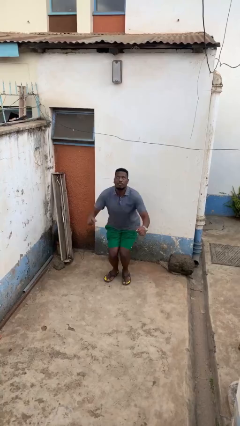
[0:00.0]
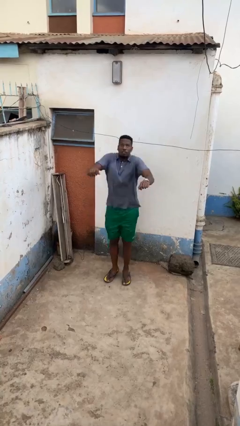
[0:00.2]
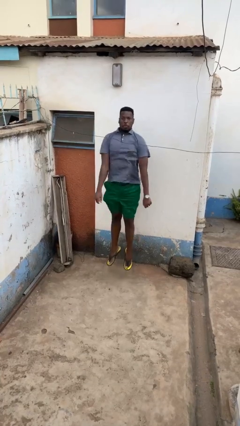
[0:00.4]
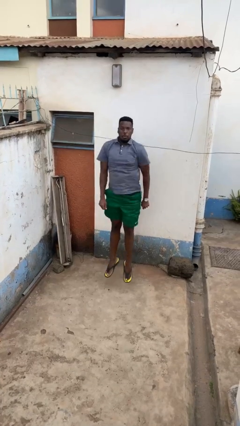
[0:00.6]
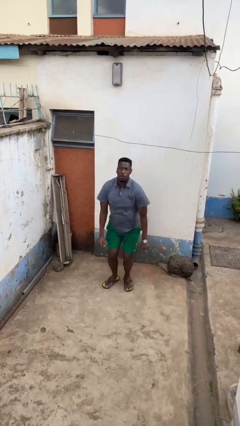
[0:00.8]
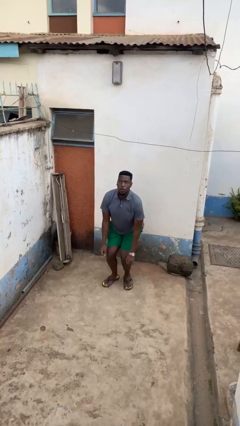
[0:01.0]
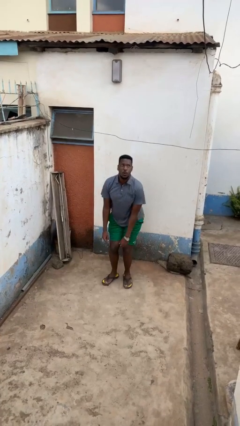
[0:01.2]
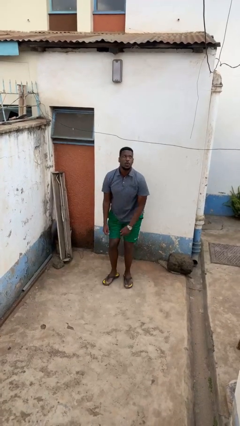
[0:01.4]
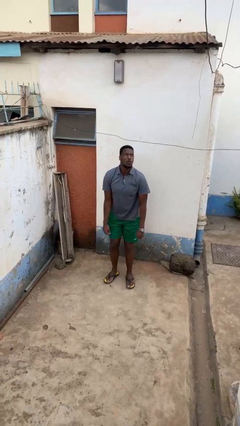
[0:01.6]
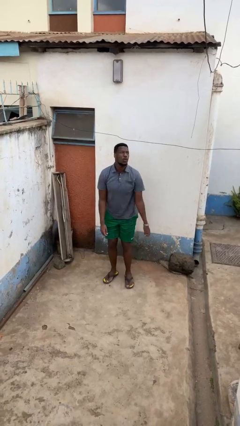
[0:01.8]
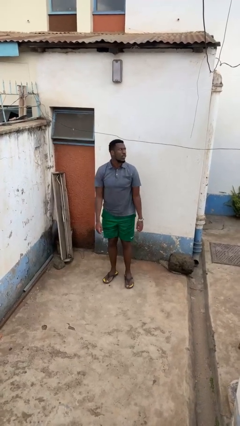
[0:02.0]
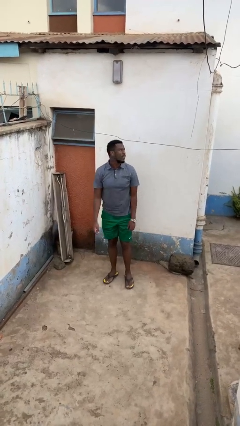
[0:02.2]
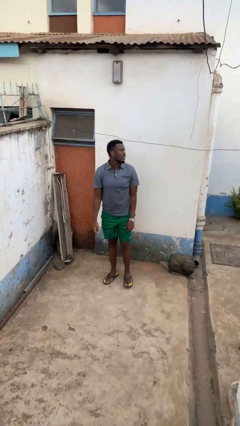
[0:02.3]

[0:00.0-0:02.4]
person jumps

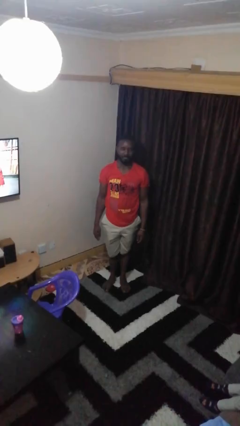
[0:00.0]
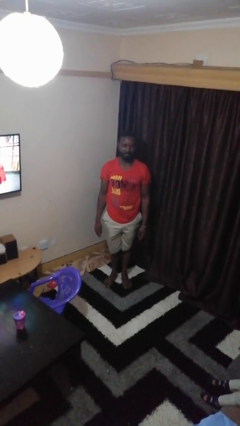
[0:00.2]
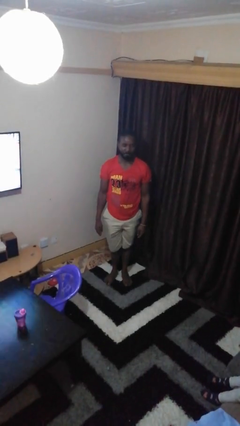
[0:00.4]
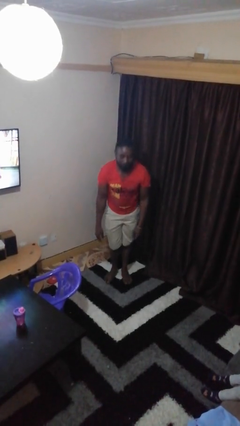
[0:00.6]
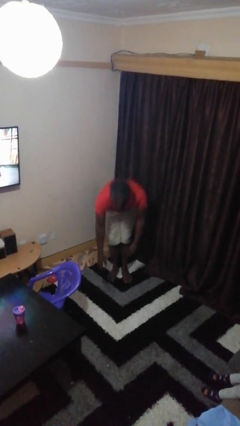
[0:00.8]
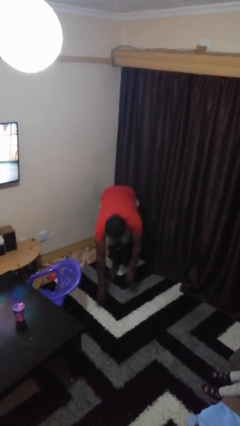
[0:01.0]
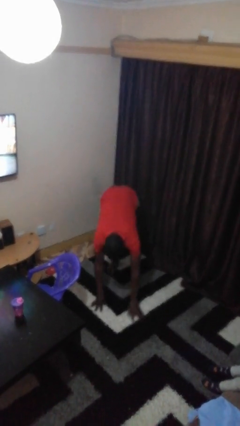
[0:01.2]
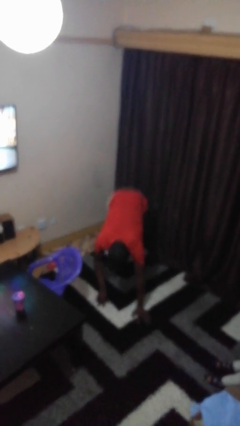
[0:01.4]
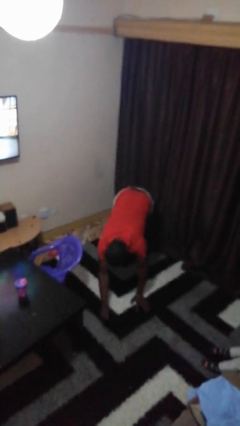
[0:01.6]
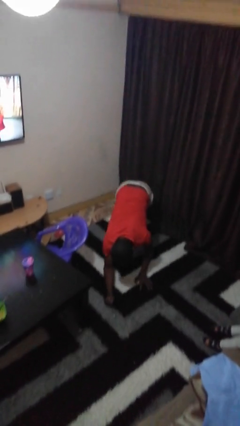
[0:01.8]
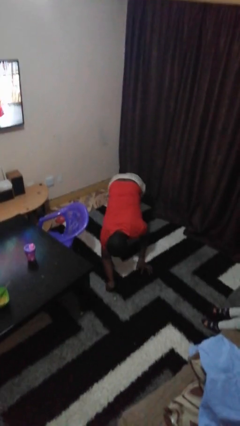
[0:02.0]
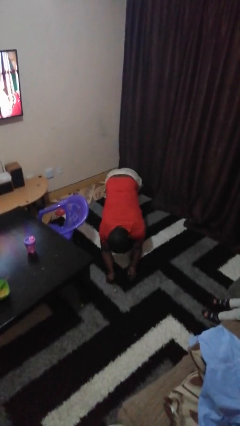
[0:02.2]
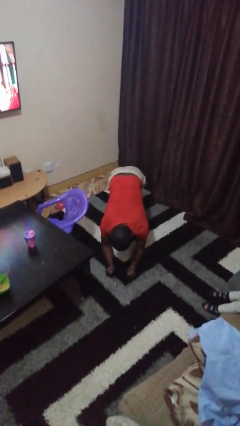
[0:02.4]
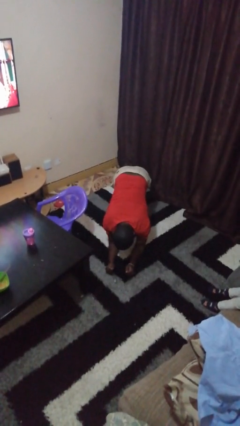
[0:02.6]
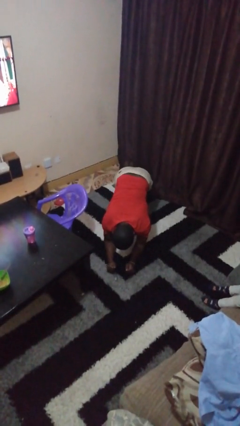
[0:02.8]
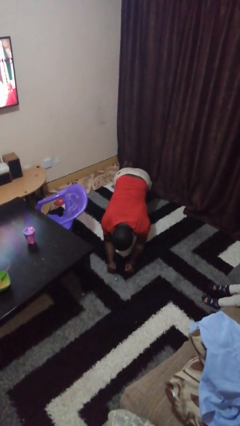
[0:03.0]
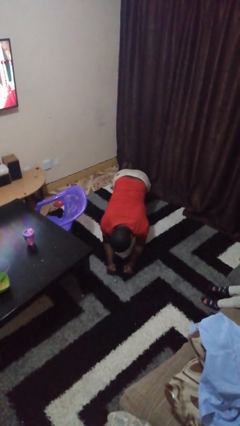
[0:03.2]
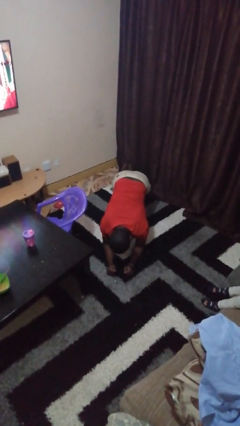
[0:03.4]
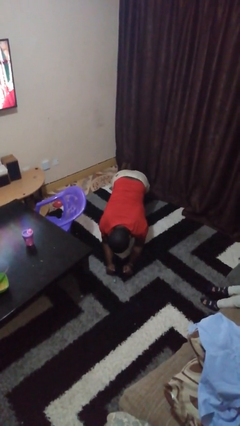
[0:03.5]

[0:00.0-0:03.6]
person exercises with plank

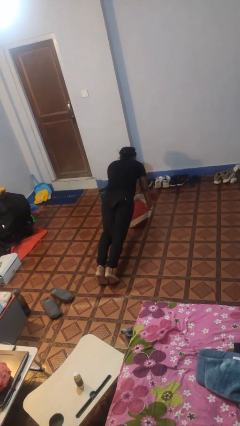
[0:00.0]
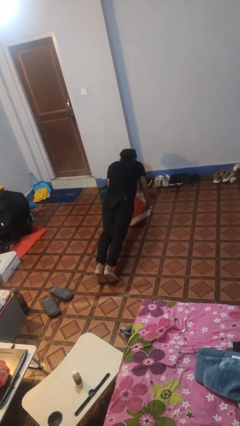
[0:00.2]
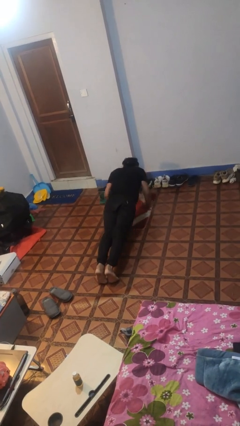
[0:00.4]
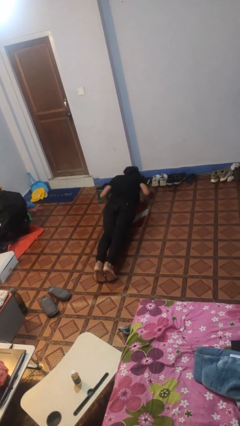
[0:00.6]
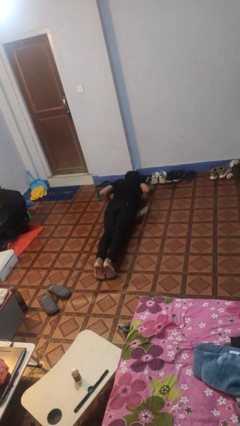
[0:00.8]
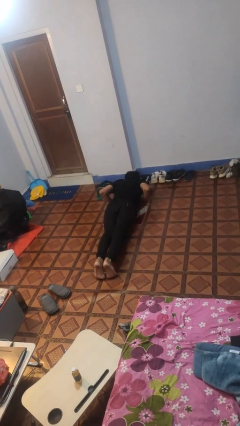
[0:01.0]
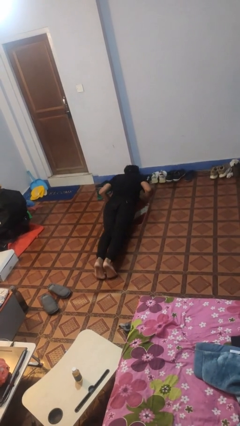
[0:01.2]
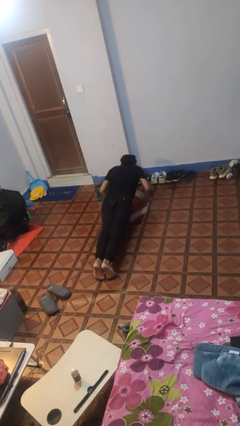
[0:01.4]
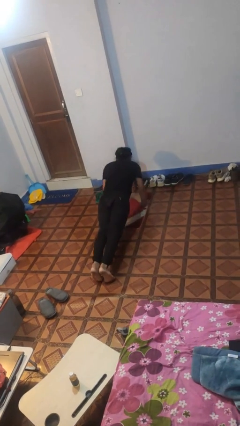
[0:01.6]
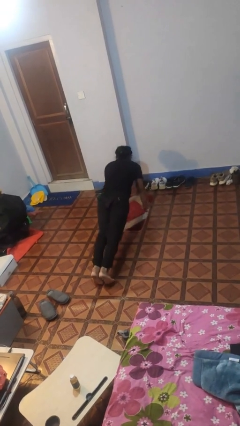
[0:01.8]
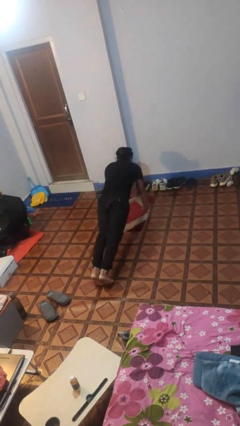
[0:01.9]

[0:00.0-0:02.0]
person exercises with pushup

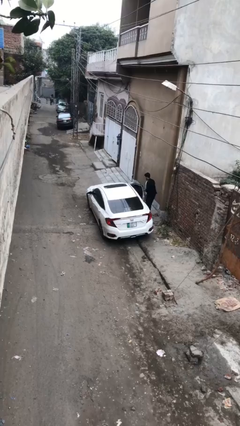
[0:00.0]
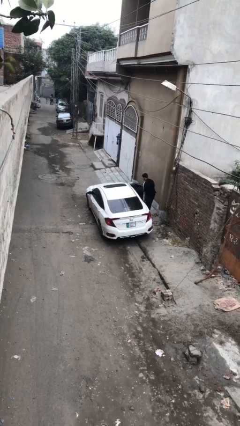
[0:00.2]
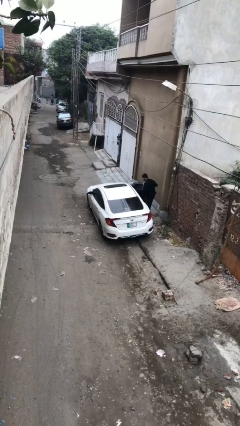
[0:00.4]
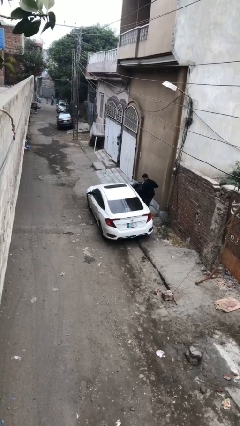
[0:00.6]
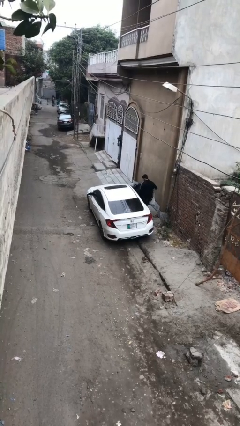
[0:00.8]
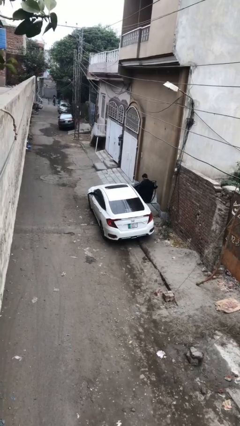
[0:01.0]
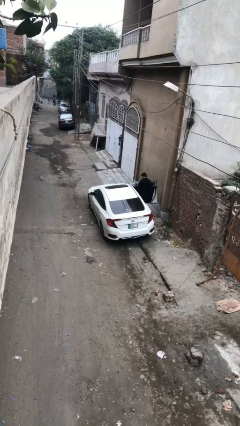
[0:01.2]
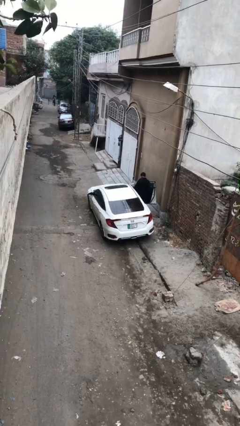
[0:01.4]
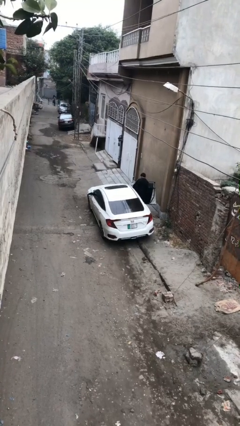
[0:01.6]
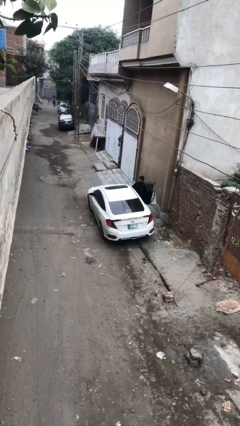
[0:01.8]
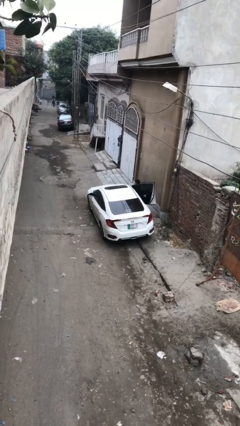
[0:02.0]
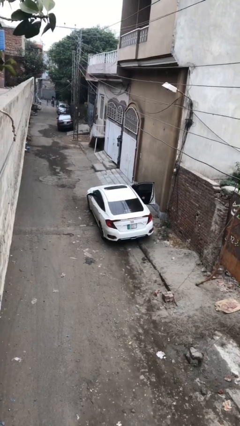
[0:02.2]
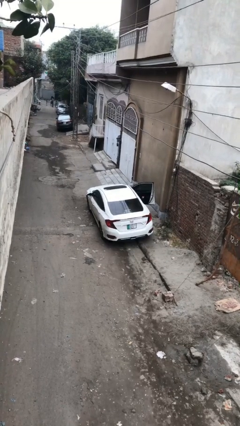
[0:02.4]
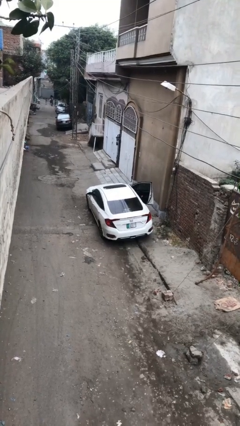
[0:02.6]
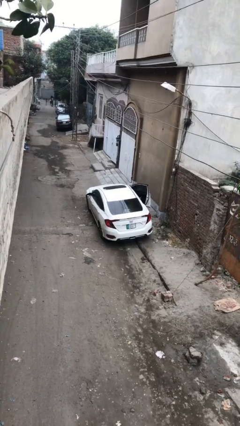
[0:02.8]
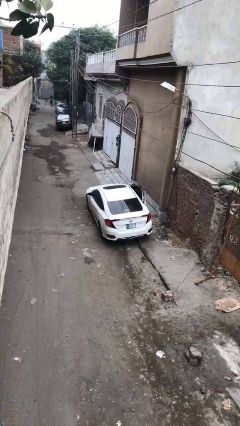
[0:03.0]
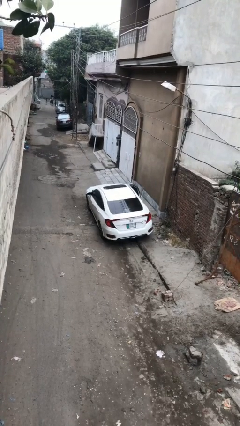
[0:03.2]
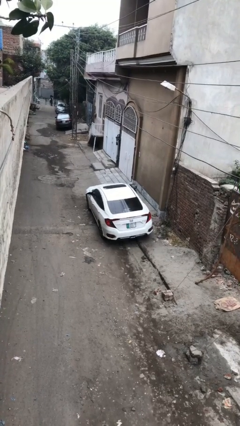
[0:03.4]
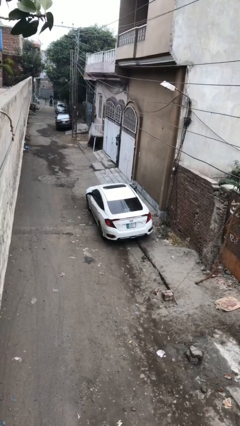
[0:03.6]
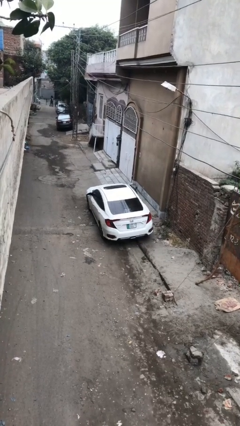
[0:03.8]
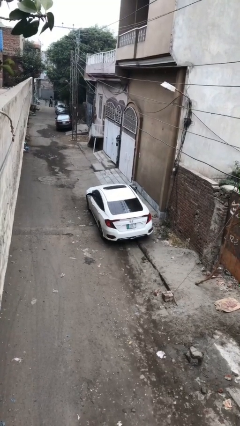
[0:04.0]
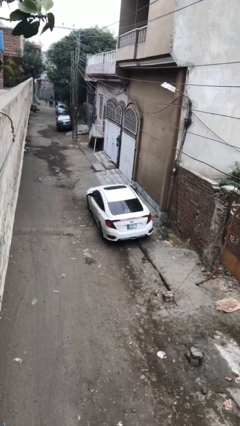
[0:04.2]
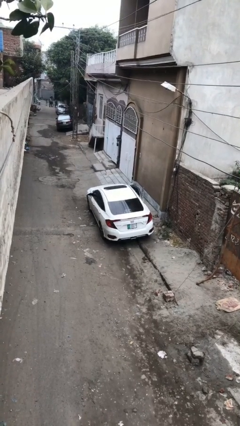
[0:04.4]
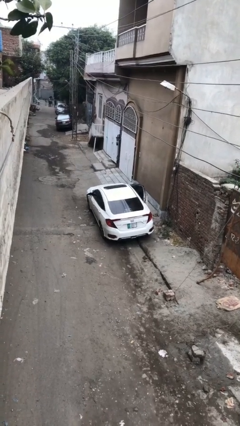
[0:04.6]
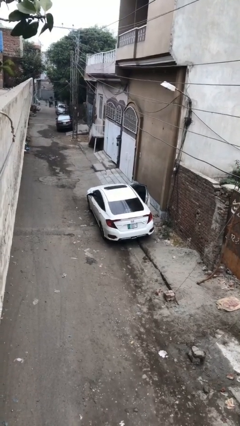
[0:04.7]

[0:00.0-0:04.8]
car picks up person

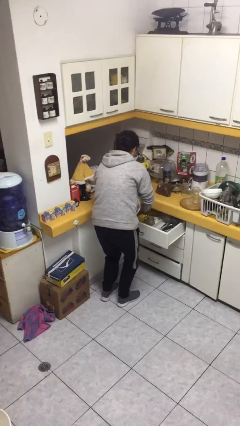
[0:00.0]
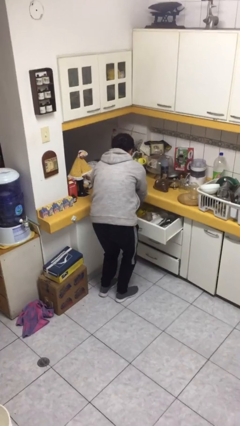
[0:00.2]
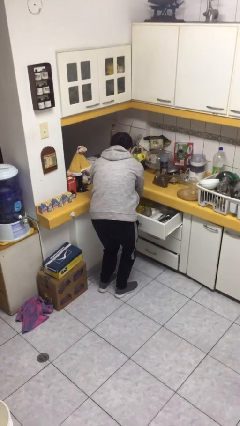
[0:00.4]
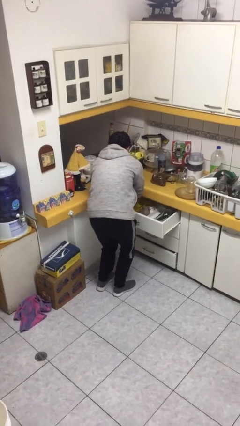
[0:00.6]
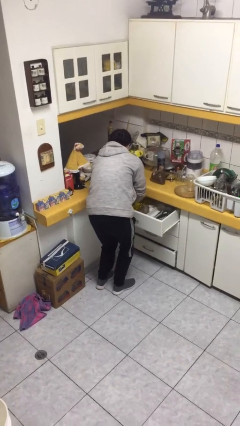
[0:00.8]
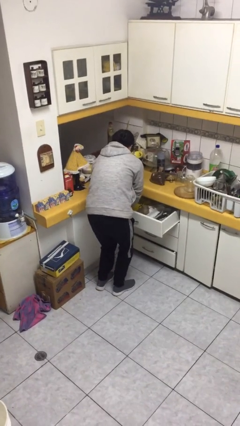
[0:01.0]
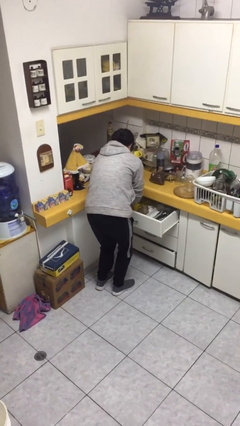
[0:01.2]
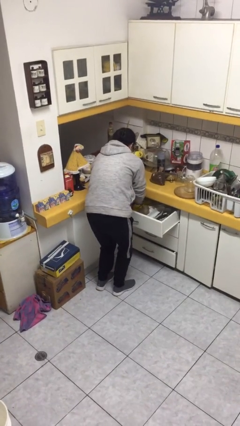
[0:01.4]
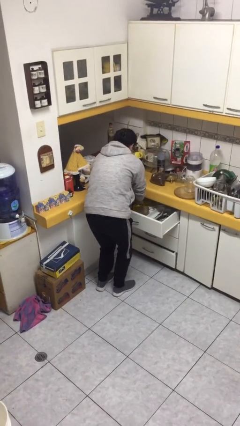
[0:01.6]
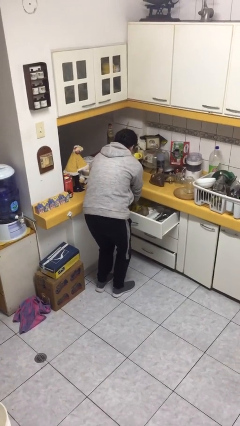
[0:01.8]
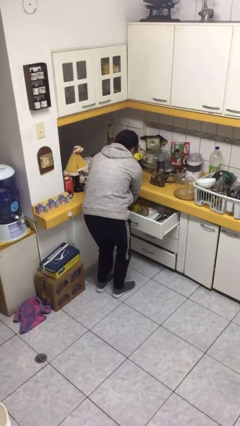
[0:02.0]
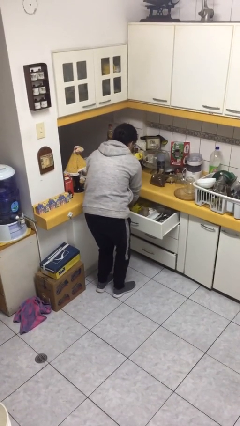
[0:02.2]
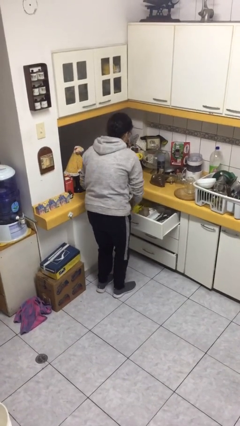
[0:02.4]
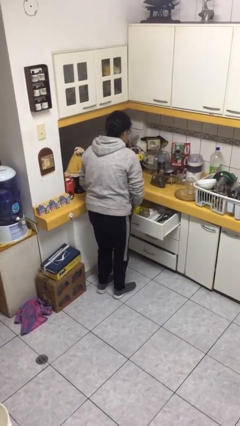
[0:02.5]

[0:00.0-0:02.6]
person searches in kitchen drawer

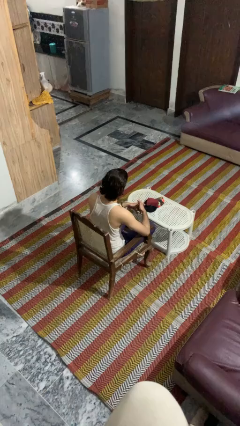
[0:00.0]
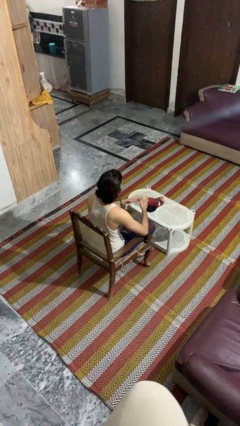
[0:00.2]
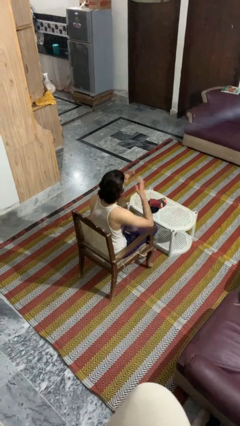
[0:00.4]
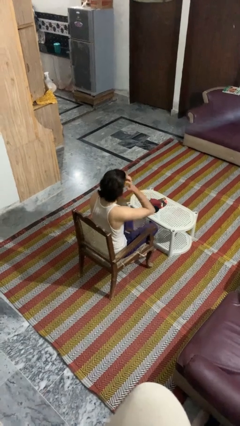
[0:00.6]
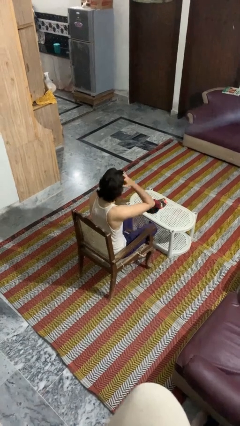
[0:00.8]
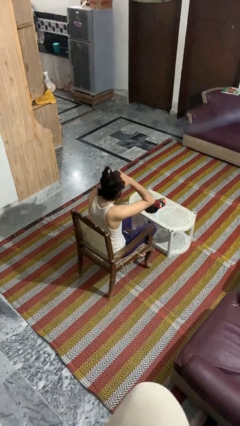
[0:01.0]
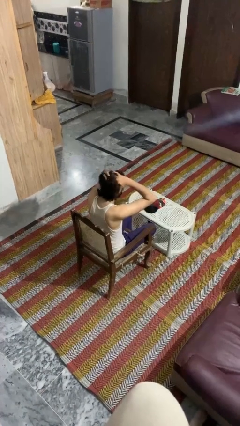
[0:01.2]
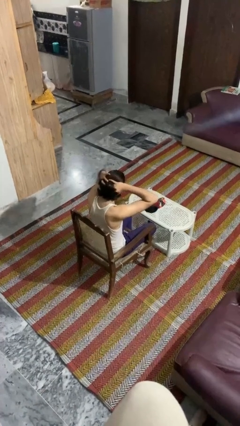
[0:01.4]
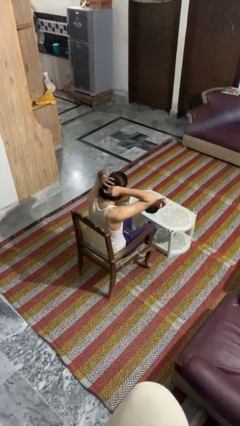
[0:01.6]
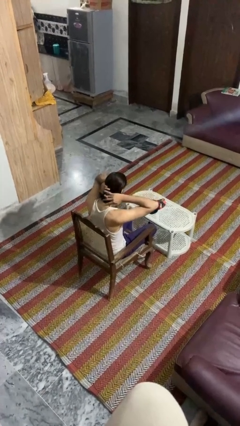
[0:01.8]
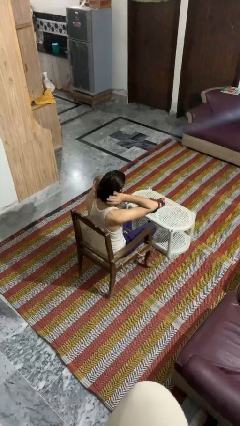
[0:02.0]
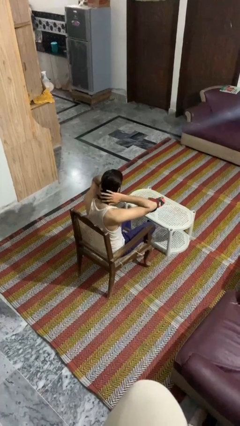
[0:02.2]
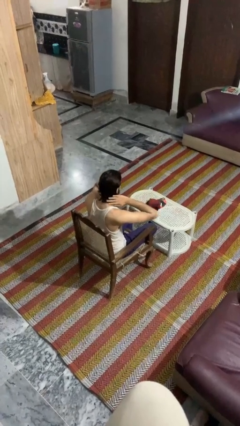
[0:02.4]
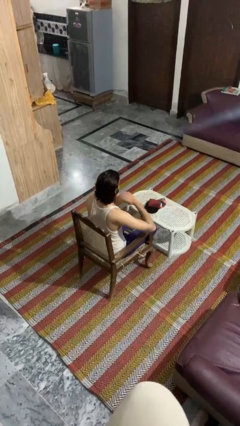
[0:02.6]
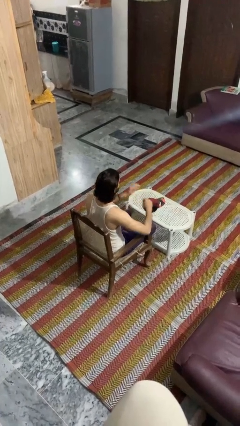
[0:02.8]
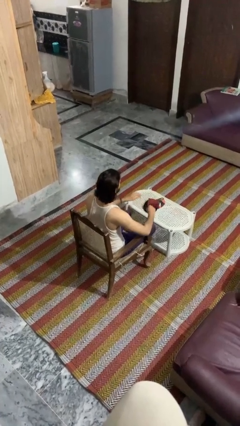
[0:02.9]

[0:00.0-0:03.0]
person strokes hair
